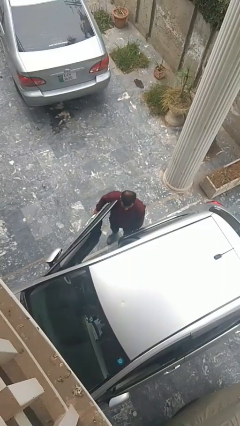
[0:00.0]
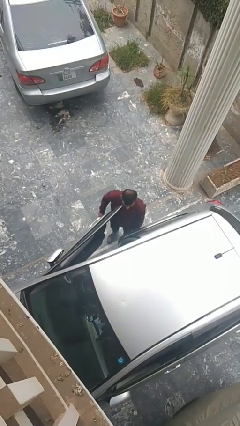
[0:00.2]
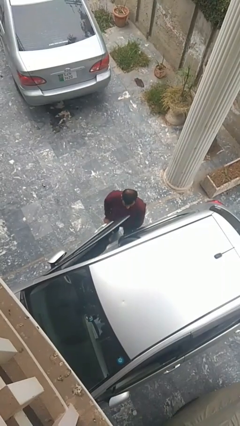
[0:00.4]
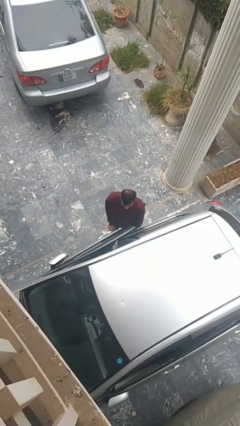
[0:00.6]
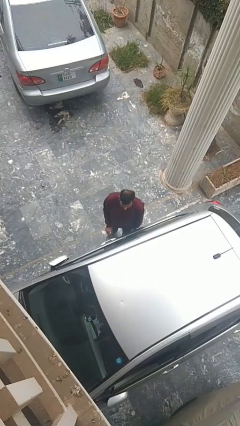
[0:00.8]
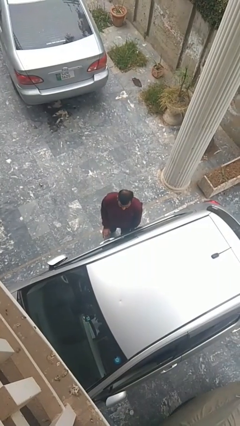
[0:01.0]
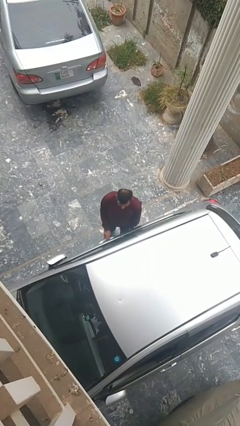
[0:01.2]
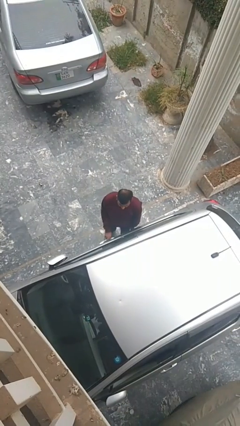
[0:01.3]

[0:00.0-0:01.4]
person closes car door

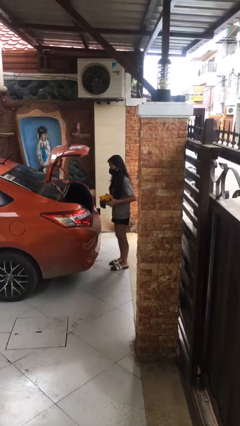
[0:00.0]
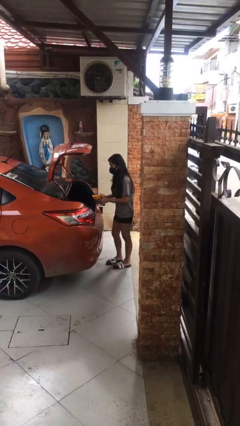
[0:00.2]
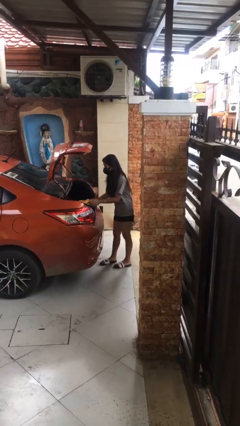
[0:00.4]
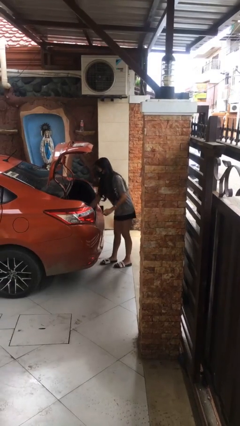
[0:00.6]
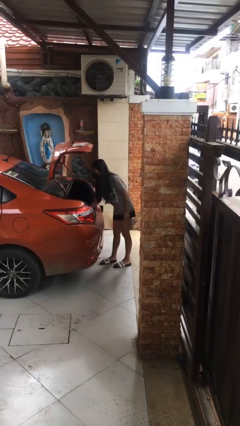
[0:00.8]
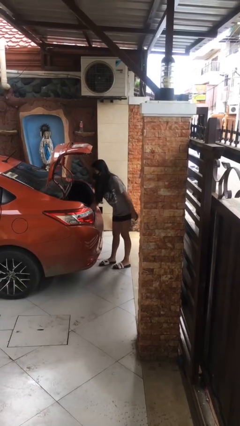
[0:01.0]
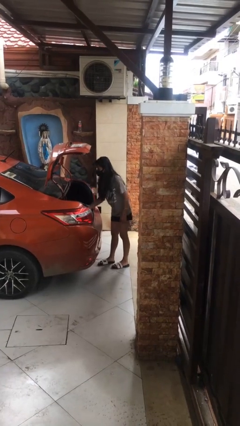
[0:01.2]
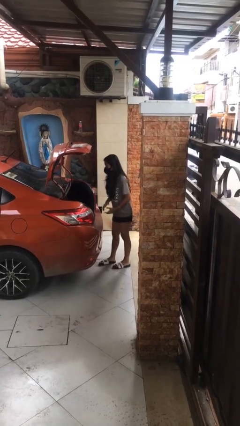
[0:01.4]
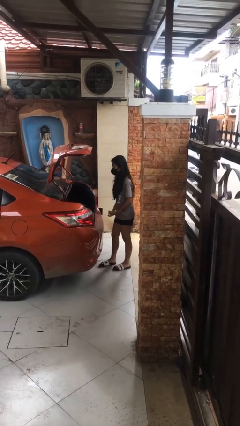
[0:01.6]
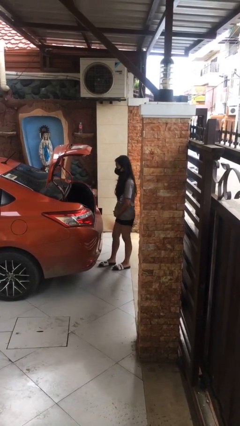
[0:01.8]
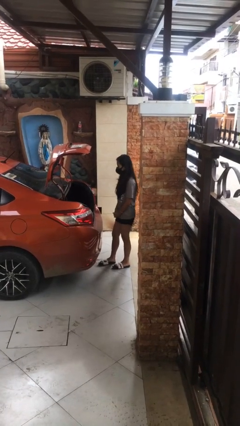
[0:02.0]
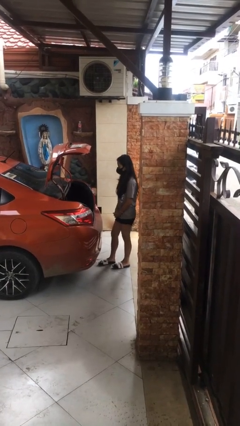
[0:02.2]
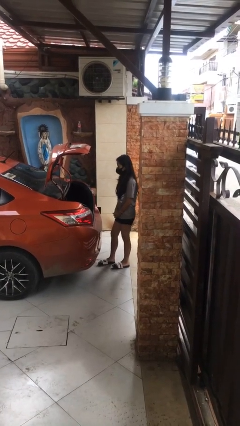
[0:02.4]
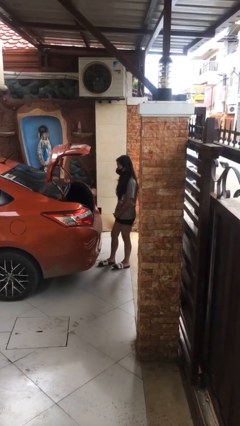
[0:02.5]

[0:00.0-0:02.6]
person loads car

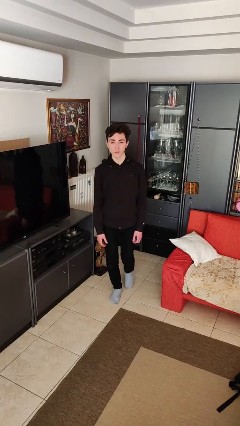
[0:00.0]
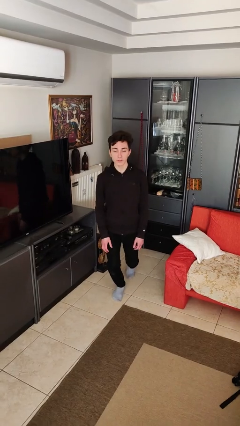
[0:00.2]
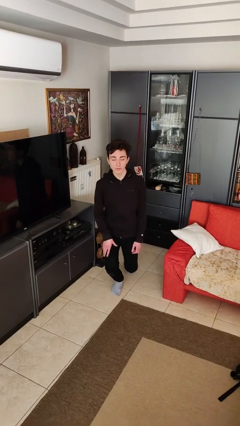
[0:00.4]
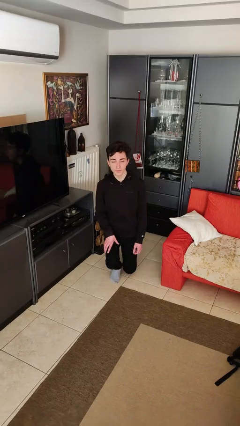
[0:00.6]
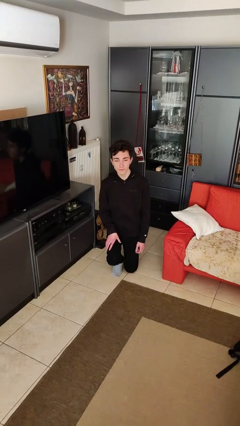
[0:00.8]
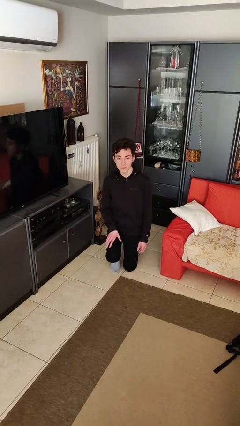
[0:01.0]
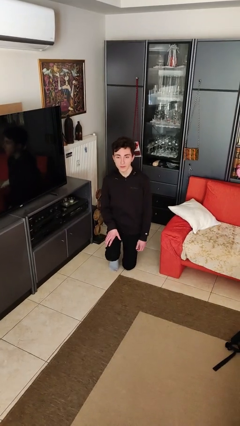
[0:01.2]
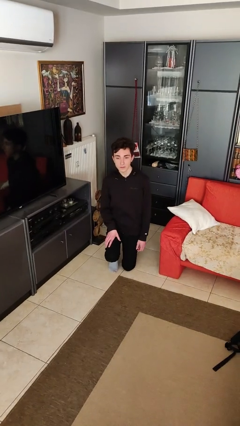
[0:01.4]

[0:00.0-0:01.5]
person kneels

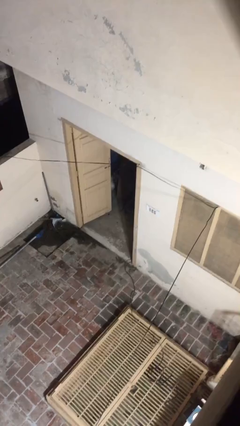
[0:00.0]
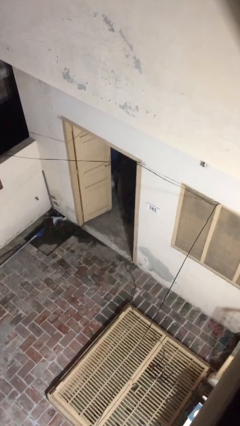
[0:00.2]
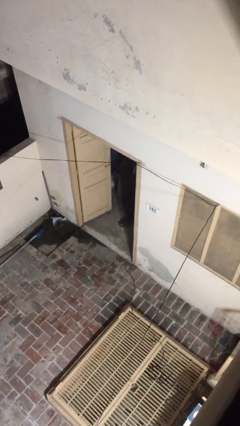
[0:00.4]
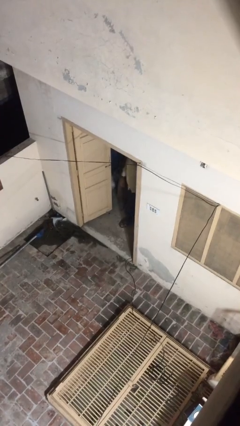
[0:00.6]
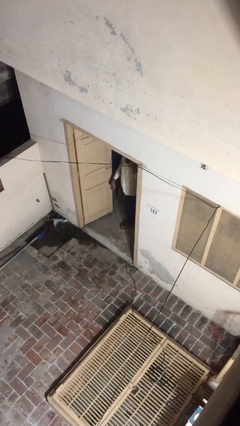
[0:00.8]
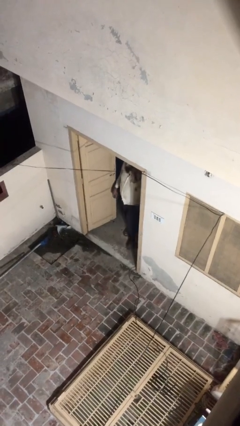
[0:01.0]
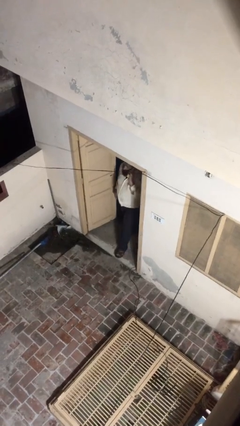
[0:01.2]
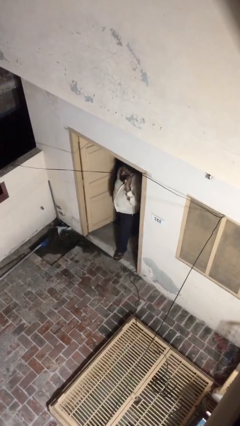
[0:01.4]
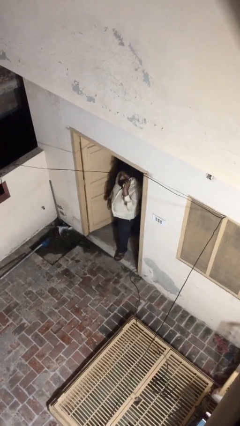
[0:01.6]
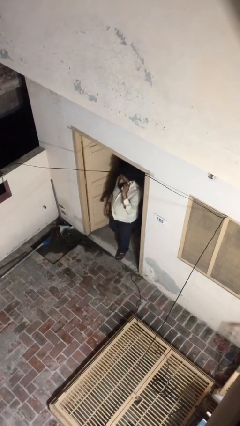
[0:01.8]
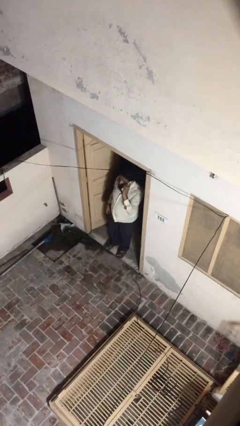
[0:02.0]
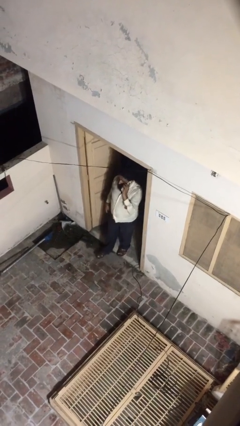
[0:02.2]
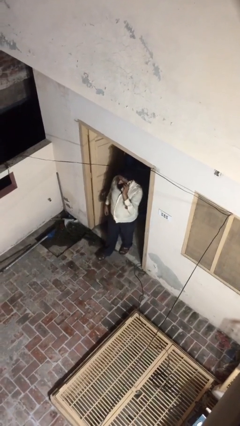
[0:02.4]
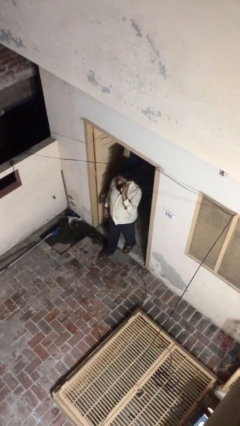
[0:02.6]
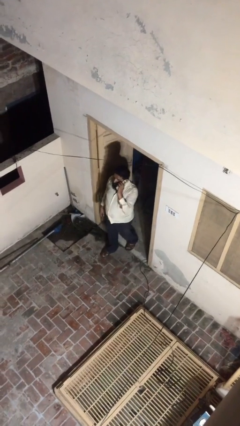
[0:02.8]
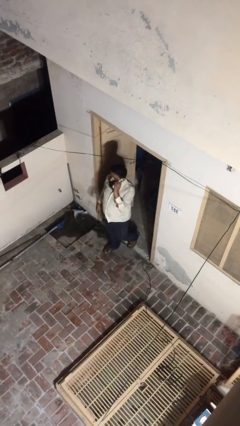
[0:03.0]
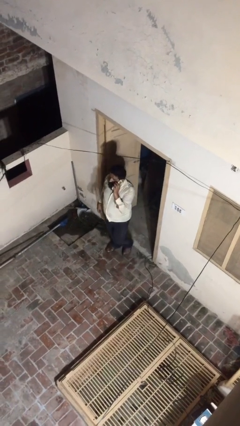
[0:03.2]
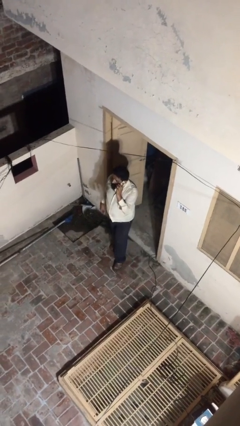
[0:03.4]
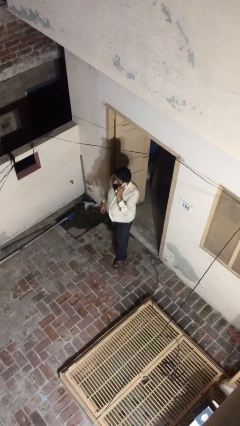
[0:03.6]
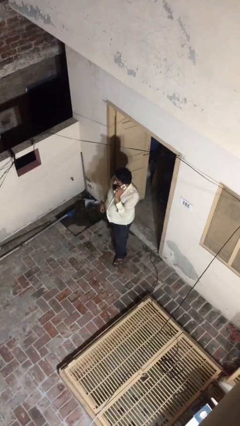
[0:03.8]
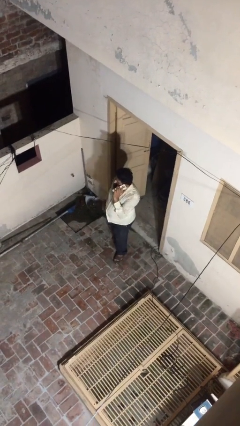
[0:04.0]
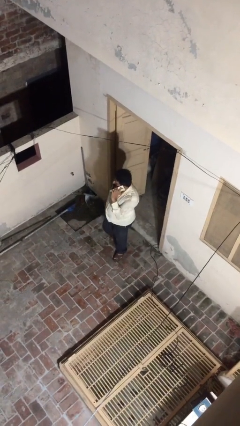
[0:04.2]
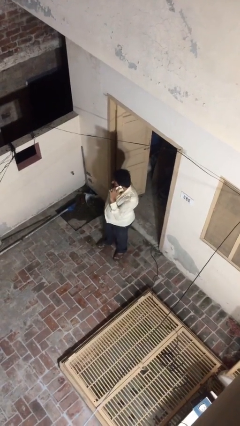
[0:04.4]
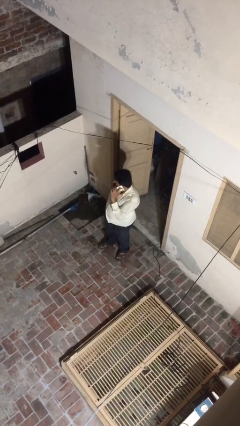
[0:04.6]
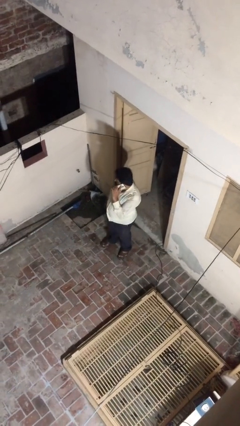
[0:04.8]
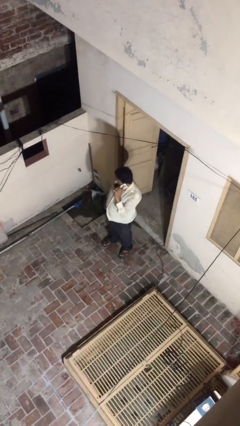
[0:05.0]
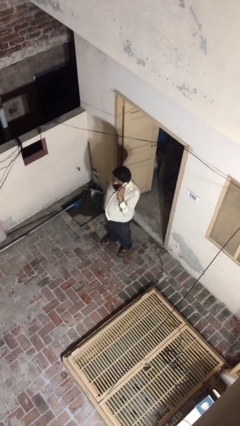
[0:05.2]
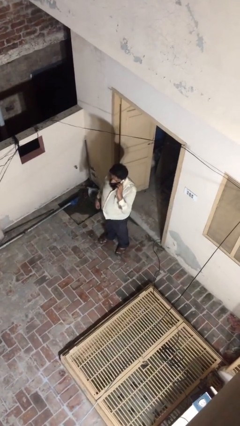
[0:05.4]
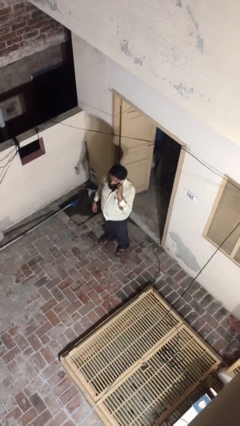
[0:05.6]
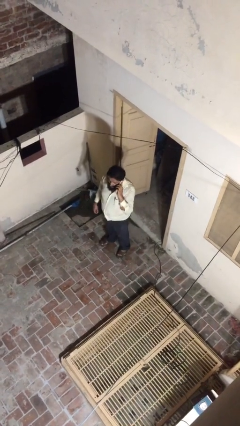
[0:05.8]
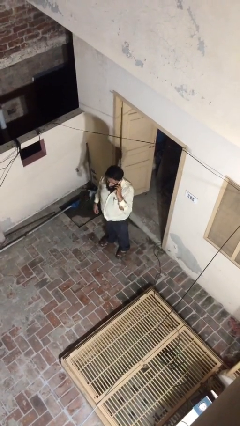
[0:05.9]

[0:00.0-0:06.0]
person enters scene through structure

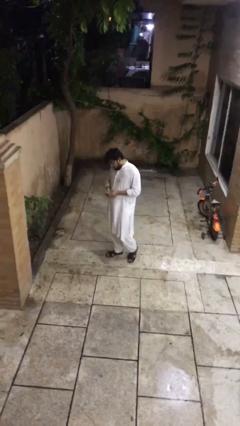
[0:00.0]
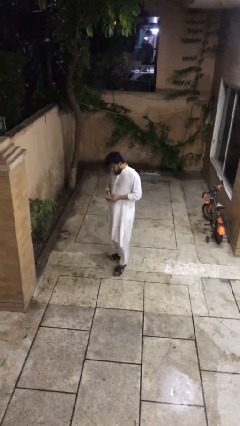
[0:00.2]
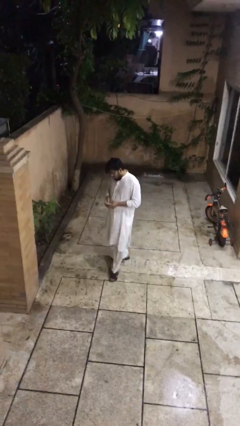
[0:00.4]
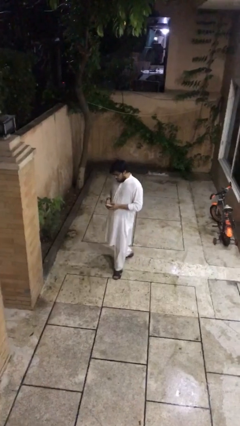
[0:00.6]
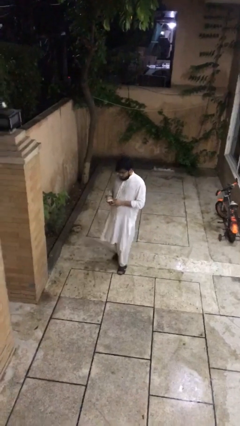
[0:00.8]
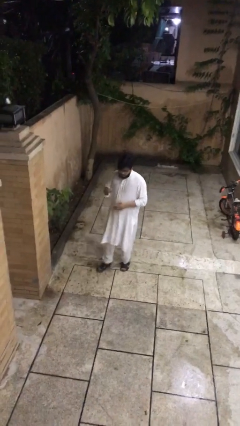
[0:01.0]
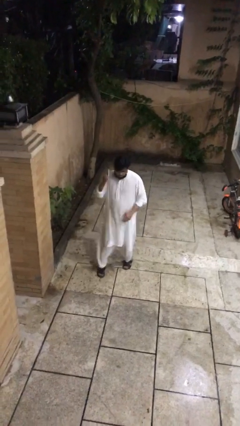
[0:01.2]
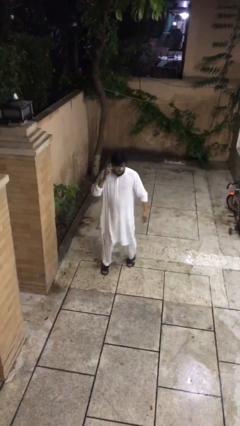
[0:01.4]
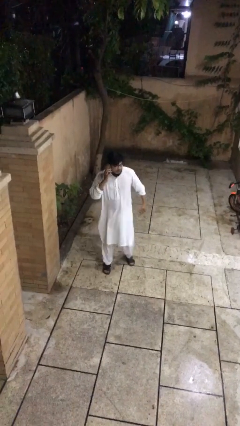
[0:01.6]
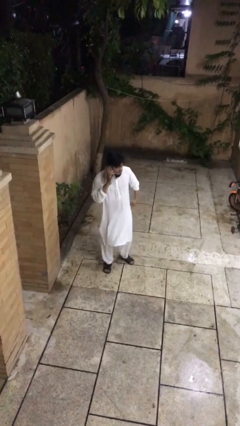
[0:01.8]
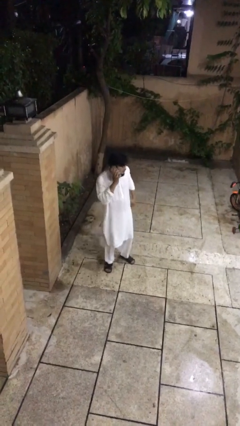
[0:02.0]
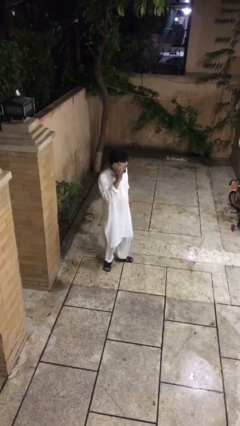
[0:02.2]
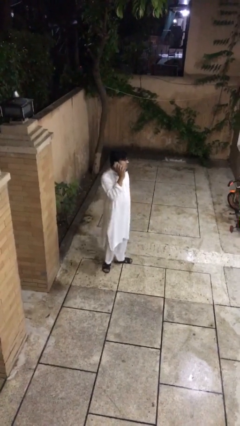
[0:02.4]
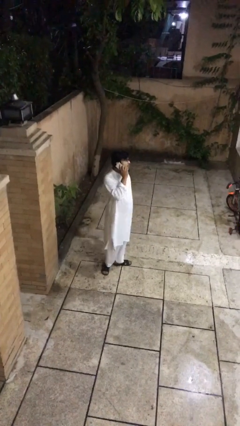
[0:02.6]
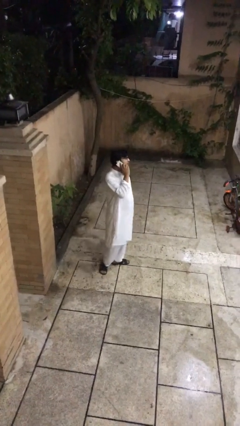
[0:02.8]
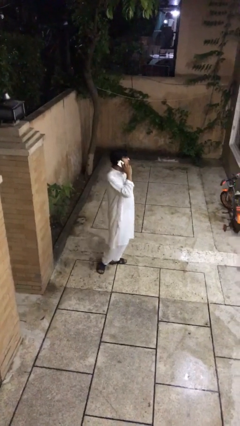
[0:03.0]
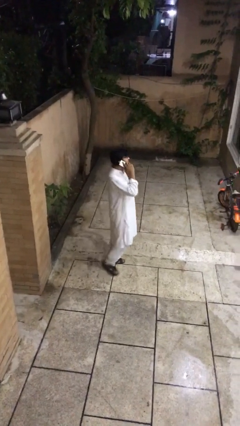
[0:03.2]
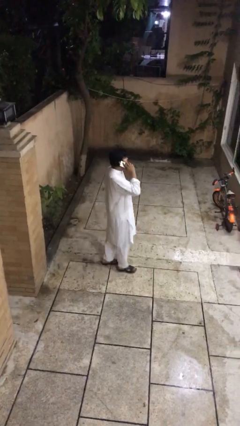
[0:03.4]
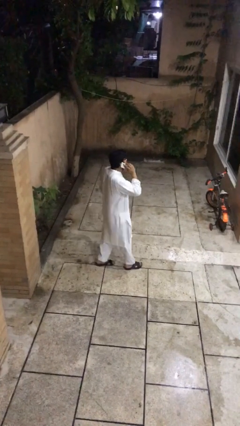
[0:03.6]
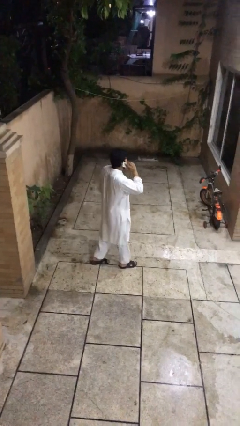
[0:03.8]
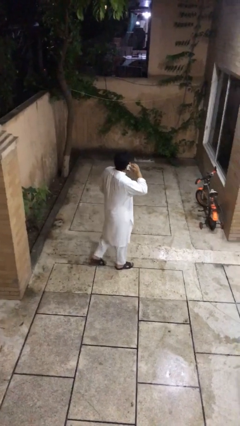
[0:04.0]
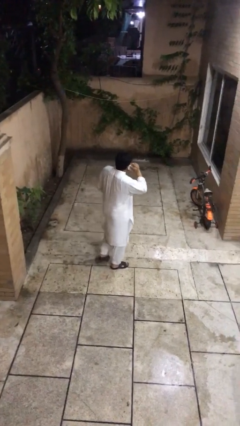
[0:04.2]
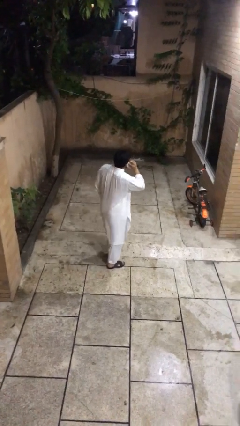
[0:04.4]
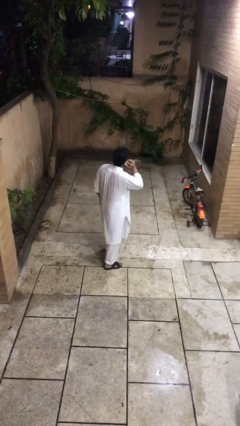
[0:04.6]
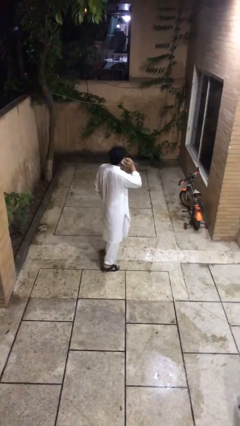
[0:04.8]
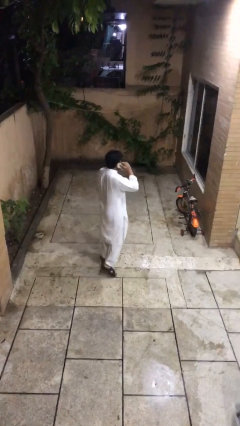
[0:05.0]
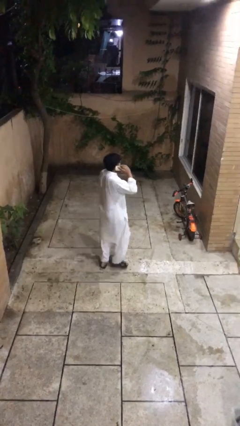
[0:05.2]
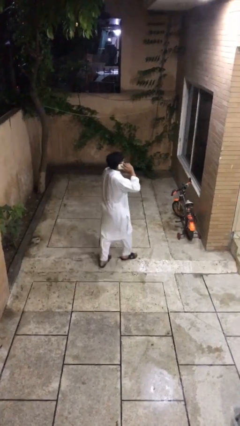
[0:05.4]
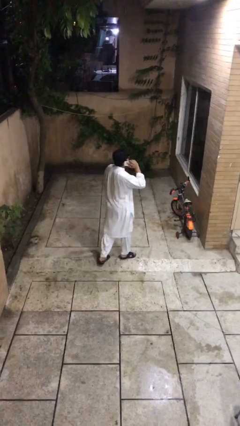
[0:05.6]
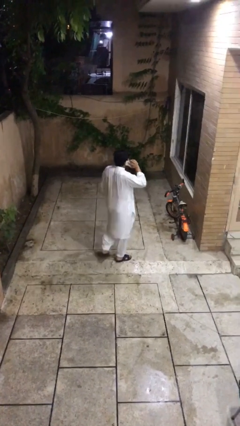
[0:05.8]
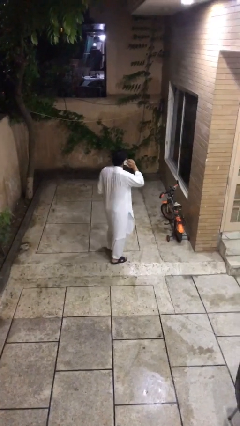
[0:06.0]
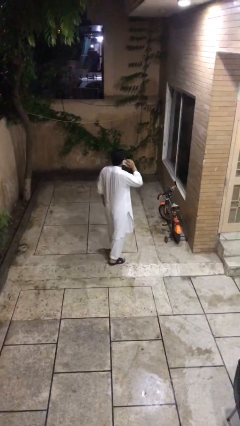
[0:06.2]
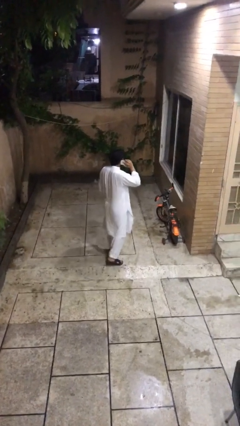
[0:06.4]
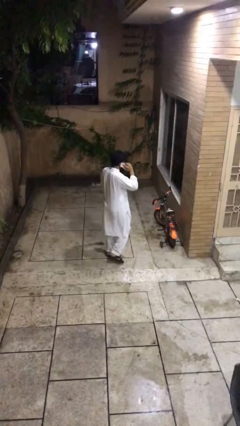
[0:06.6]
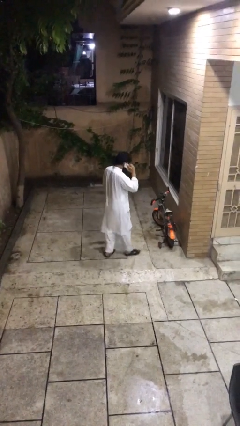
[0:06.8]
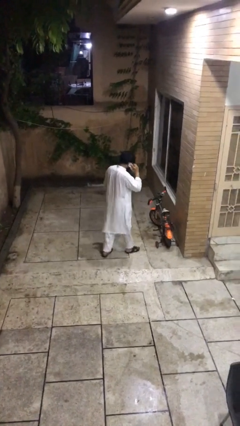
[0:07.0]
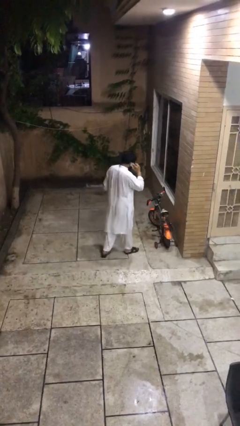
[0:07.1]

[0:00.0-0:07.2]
person talks on phone
